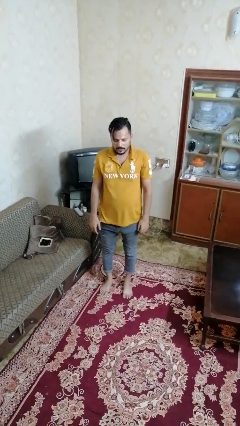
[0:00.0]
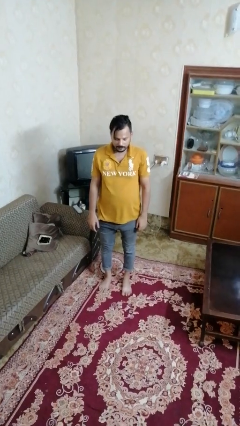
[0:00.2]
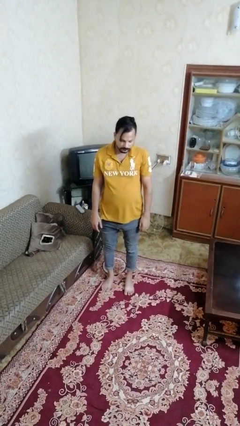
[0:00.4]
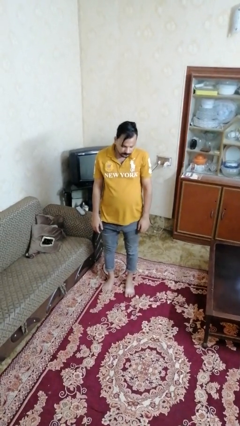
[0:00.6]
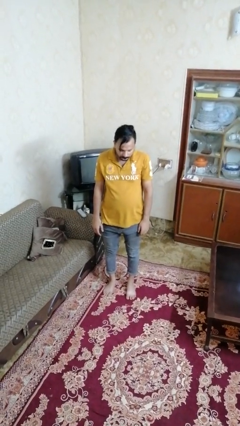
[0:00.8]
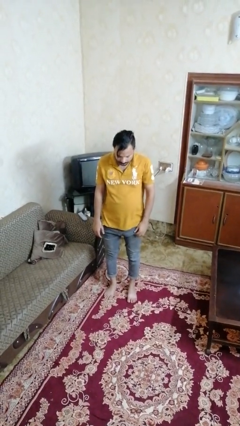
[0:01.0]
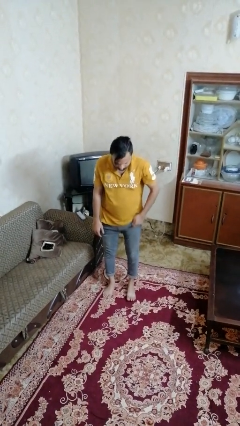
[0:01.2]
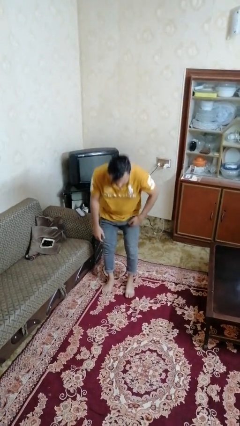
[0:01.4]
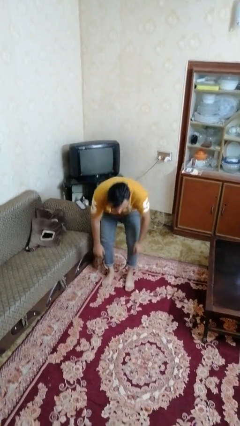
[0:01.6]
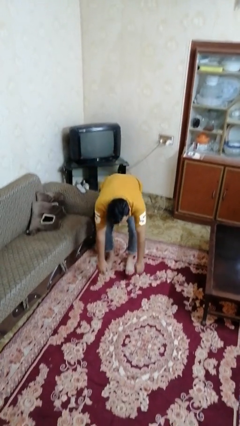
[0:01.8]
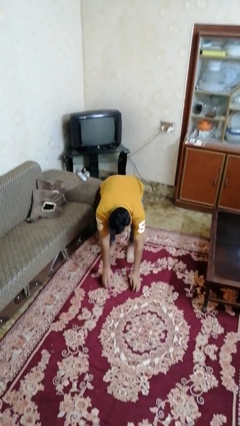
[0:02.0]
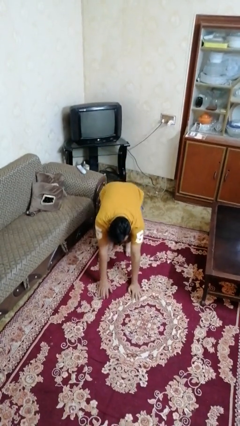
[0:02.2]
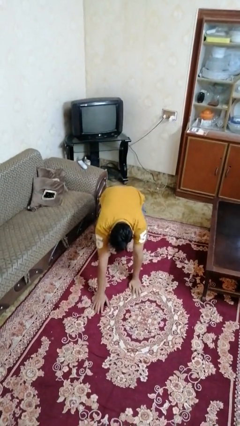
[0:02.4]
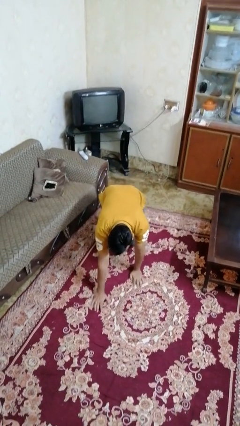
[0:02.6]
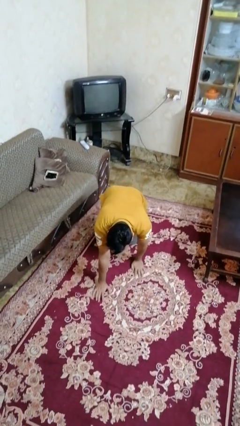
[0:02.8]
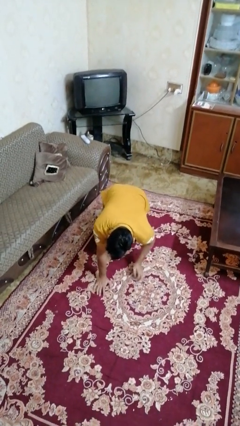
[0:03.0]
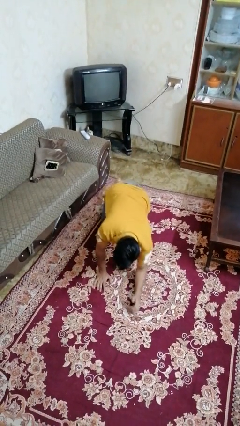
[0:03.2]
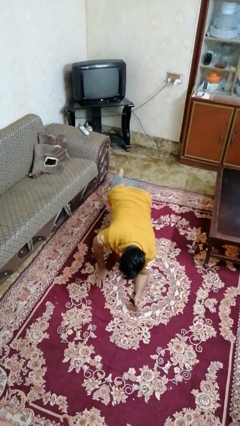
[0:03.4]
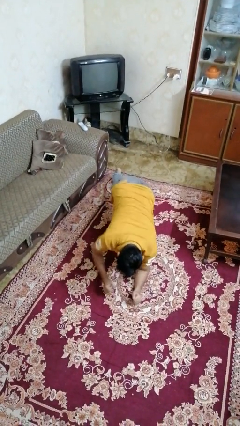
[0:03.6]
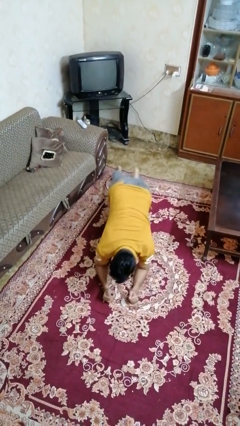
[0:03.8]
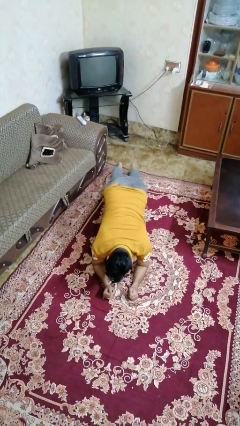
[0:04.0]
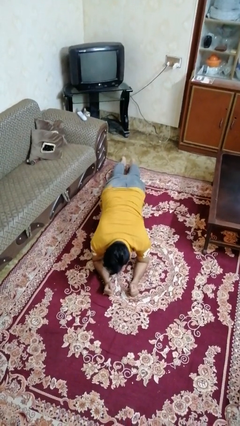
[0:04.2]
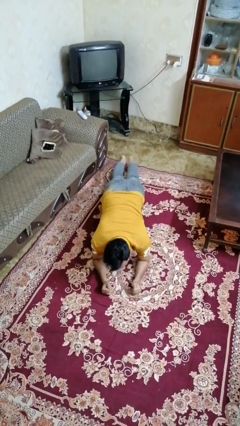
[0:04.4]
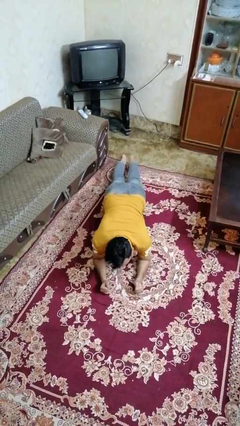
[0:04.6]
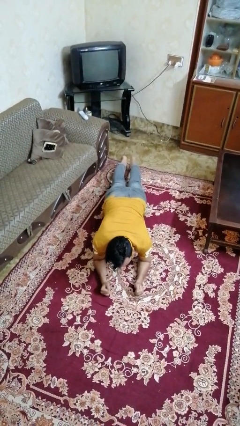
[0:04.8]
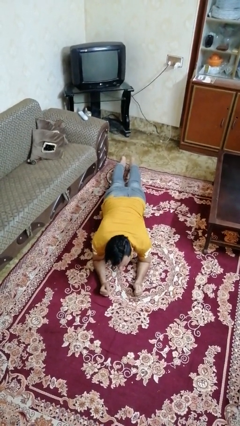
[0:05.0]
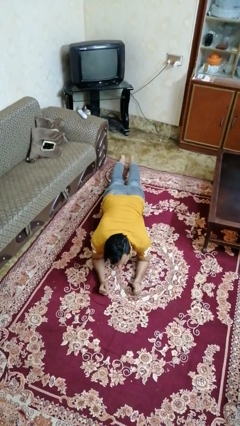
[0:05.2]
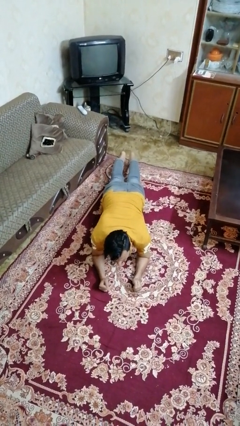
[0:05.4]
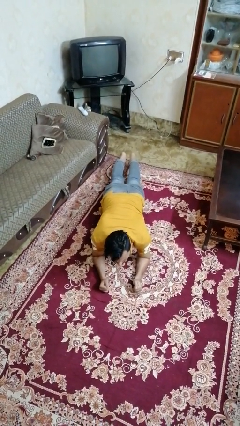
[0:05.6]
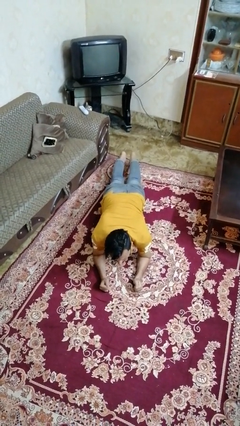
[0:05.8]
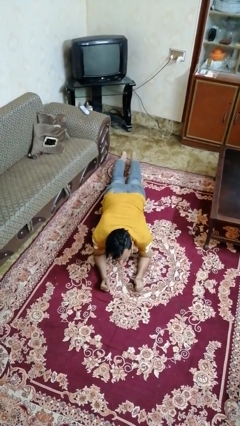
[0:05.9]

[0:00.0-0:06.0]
person exercises with plank

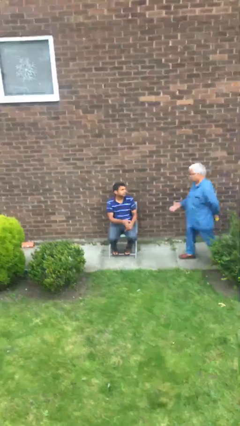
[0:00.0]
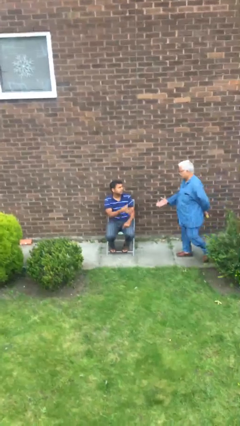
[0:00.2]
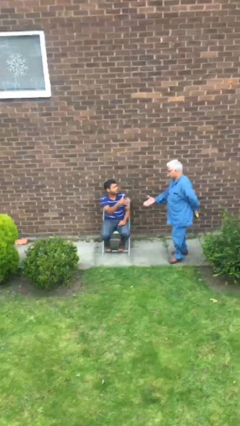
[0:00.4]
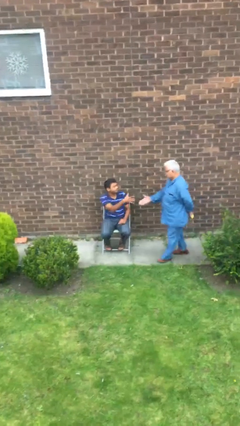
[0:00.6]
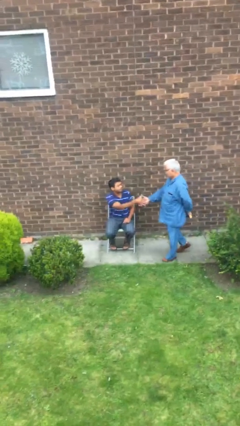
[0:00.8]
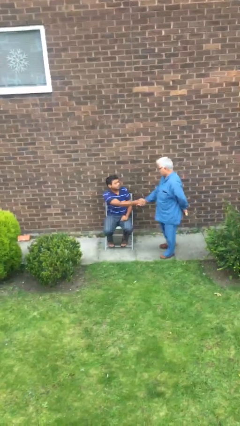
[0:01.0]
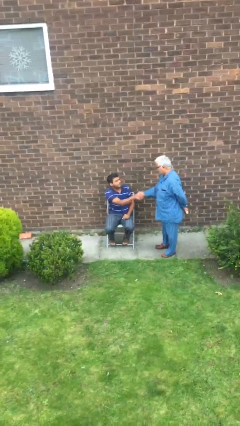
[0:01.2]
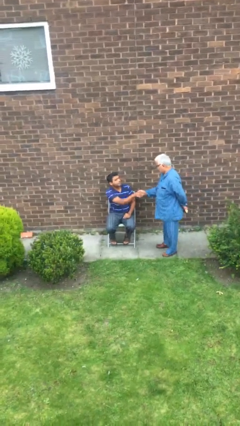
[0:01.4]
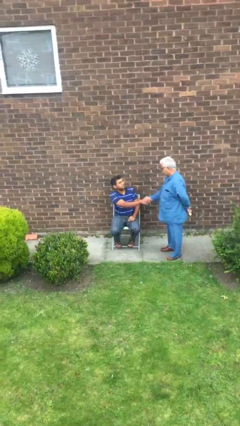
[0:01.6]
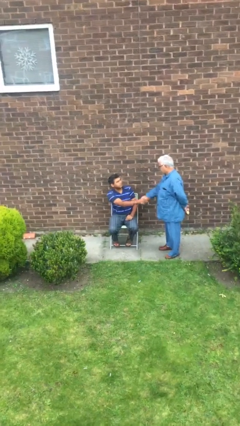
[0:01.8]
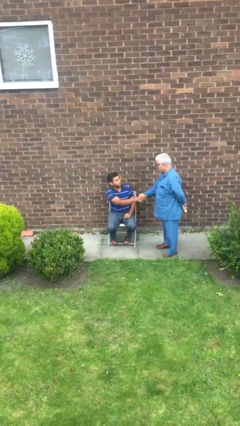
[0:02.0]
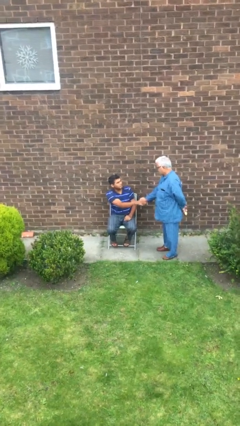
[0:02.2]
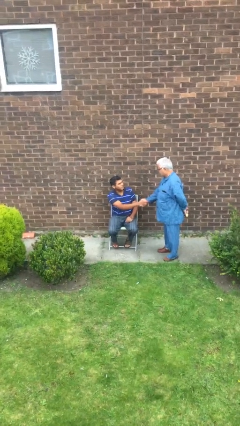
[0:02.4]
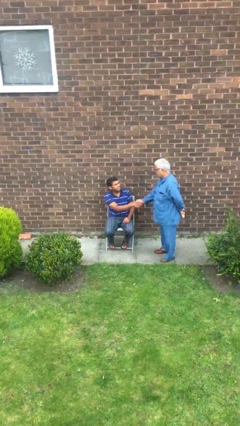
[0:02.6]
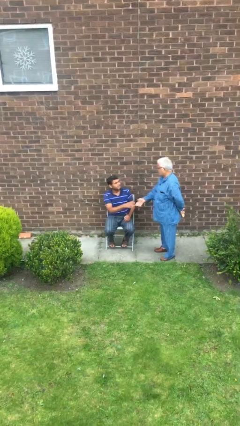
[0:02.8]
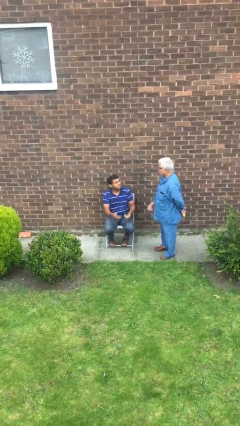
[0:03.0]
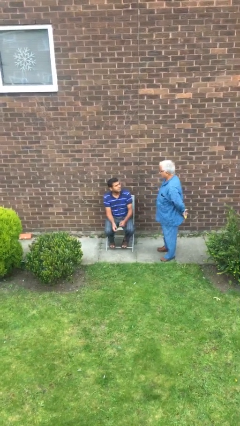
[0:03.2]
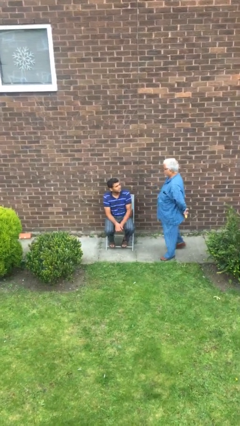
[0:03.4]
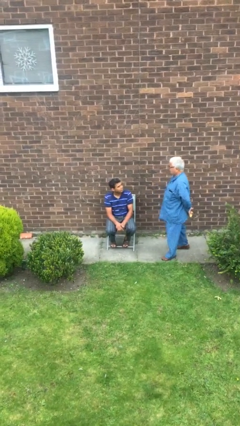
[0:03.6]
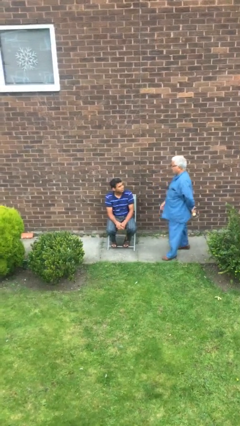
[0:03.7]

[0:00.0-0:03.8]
person shakes hand

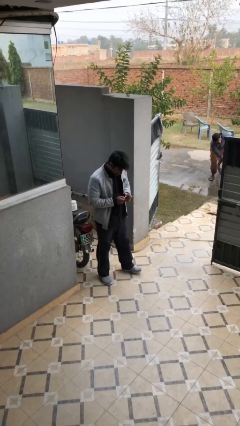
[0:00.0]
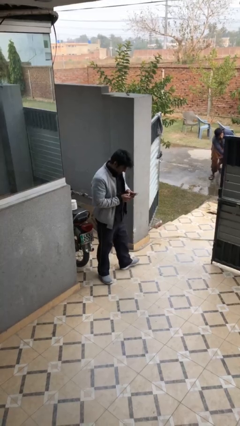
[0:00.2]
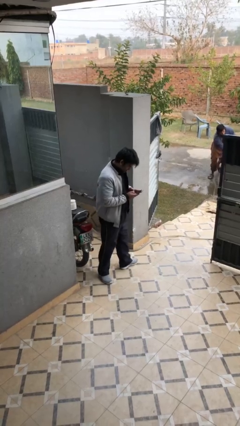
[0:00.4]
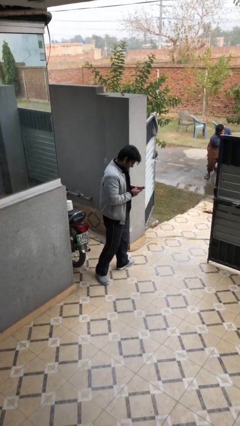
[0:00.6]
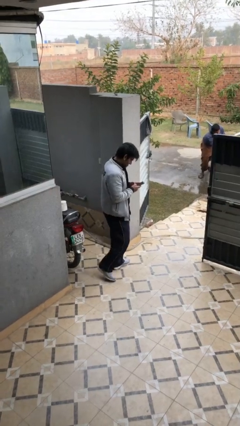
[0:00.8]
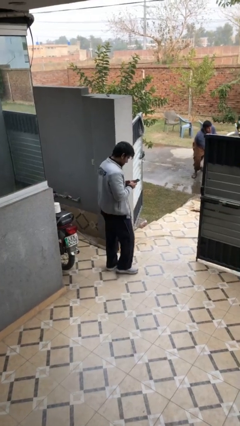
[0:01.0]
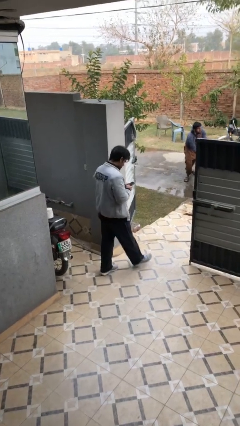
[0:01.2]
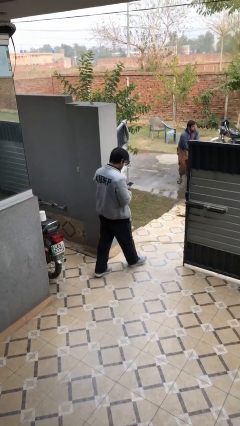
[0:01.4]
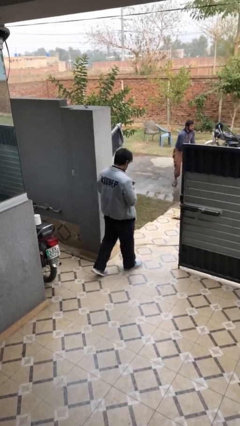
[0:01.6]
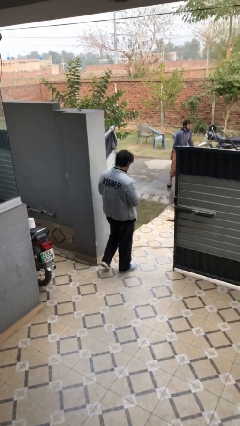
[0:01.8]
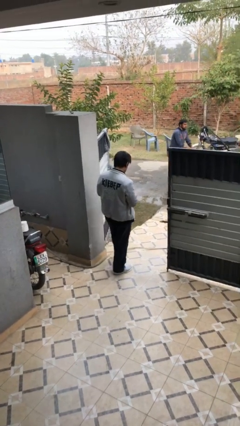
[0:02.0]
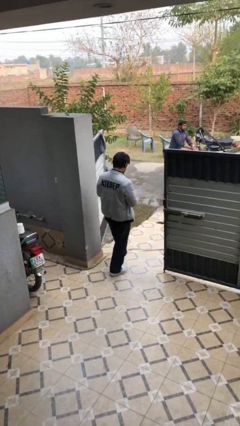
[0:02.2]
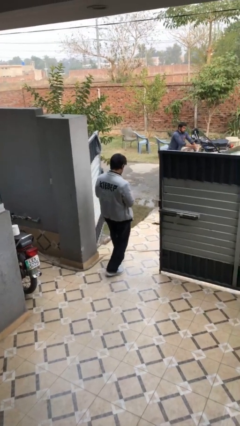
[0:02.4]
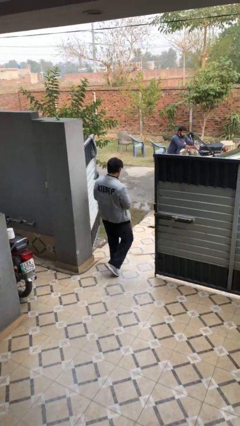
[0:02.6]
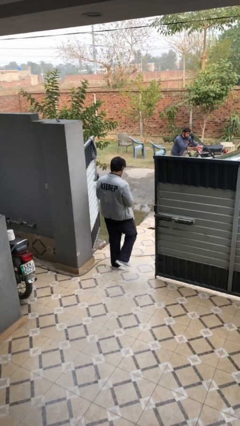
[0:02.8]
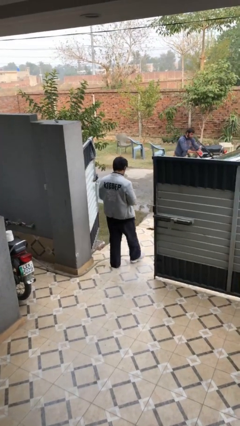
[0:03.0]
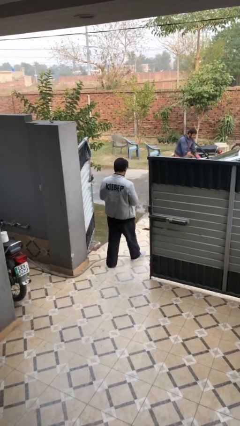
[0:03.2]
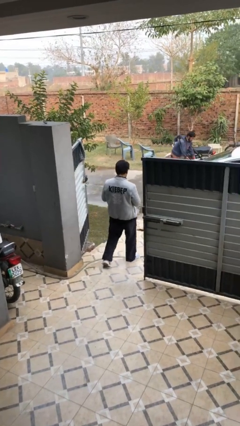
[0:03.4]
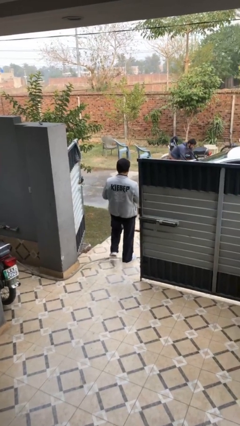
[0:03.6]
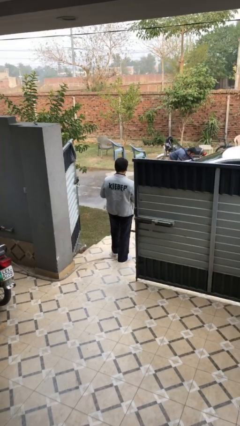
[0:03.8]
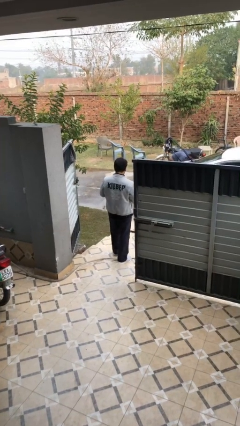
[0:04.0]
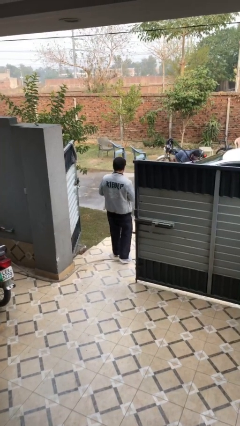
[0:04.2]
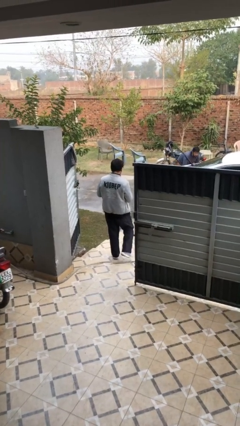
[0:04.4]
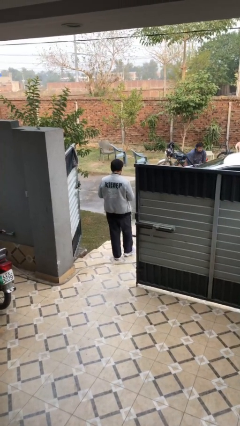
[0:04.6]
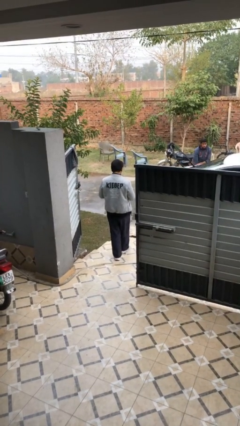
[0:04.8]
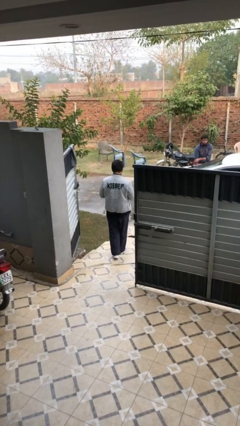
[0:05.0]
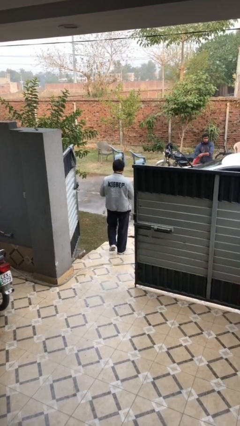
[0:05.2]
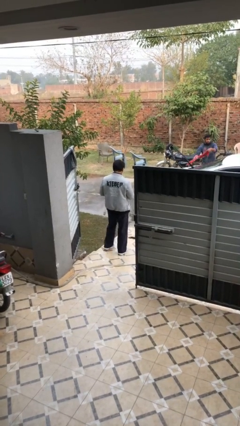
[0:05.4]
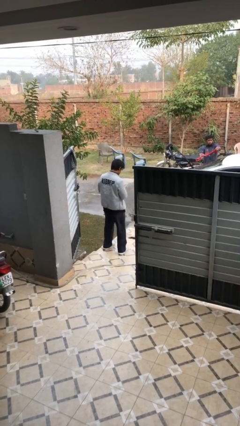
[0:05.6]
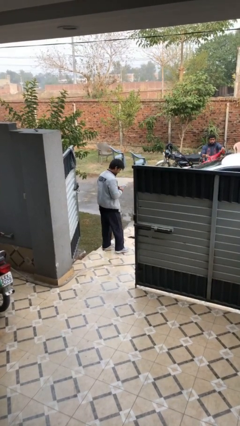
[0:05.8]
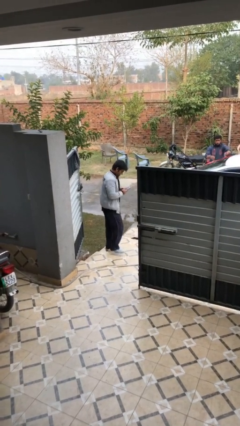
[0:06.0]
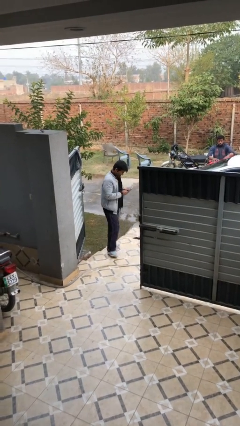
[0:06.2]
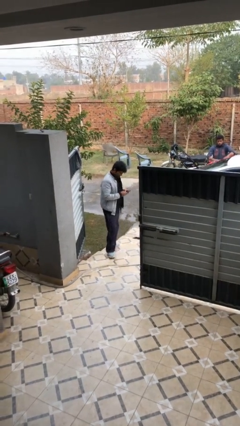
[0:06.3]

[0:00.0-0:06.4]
person exits scene through structure

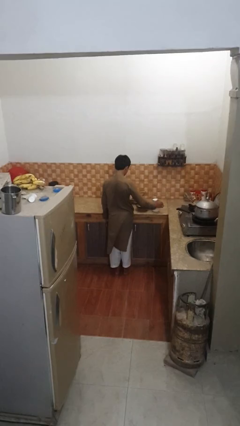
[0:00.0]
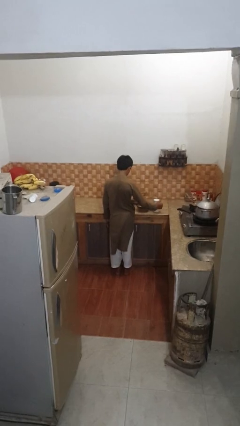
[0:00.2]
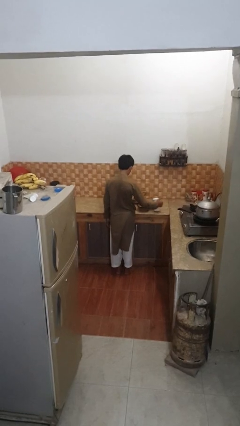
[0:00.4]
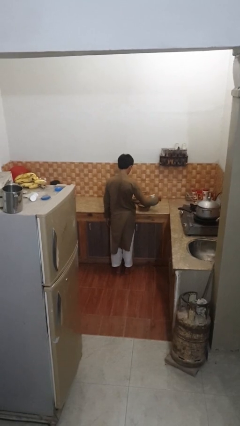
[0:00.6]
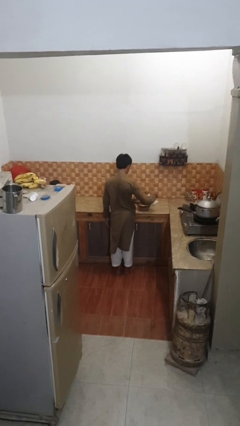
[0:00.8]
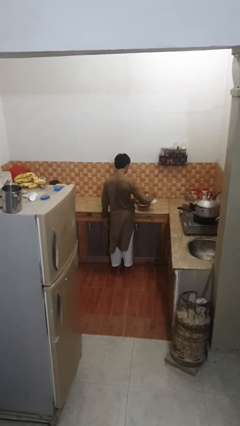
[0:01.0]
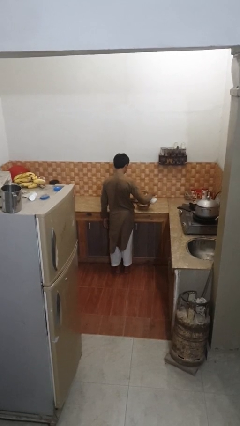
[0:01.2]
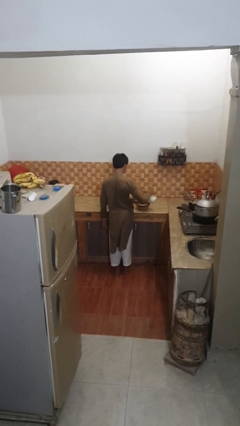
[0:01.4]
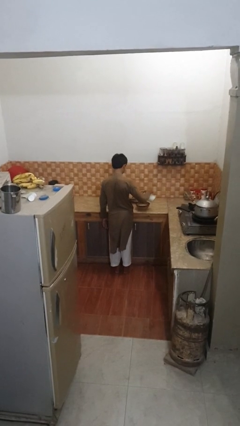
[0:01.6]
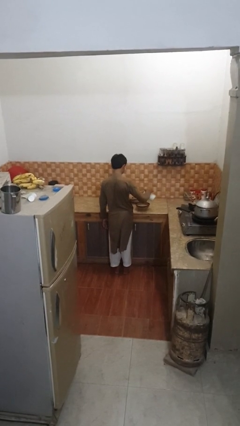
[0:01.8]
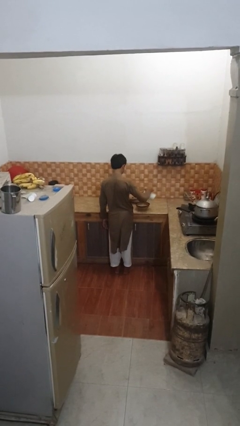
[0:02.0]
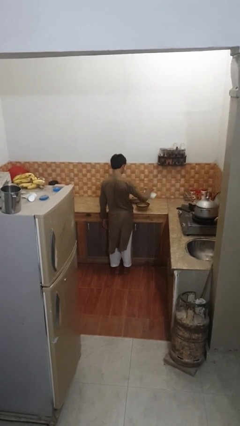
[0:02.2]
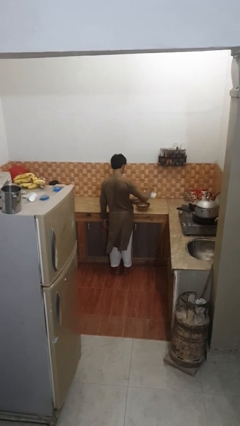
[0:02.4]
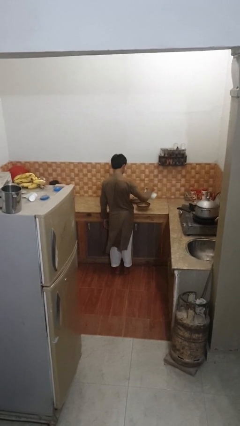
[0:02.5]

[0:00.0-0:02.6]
person pours into bowl
